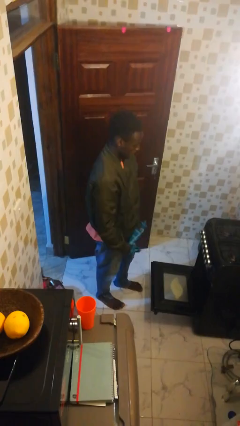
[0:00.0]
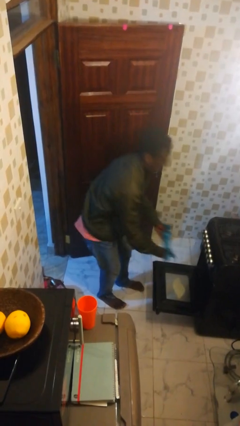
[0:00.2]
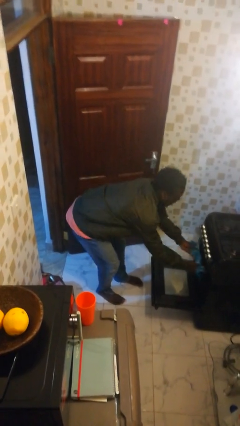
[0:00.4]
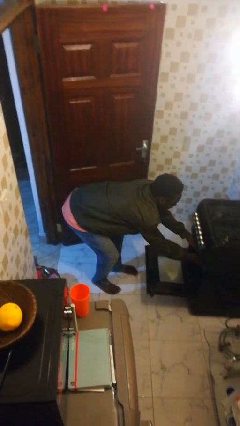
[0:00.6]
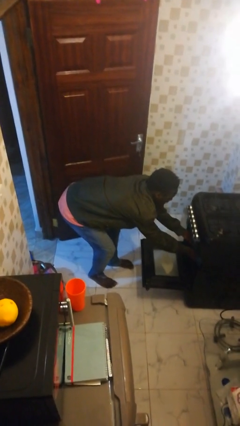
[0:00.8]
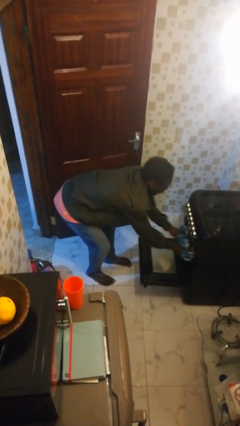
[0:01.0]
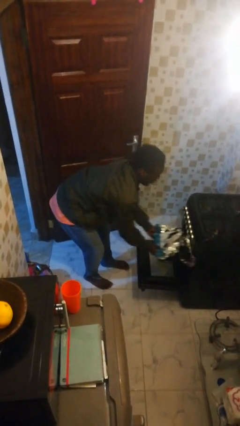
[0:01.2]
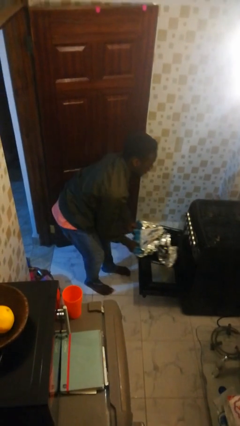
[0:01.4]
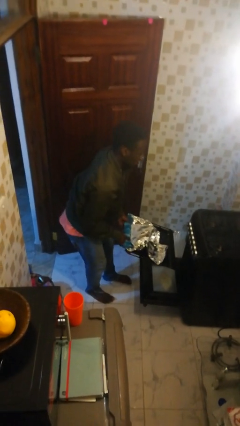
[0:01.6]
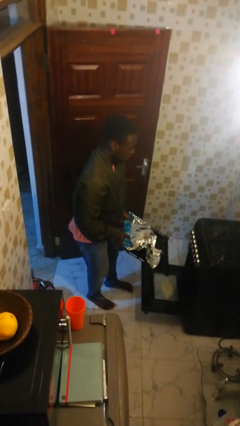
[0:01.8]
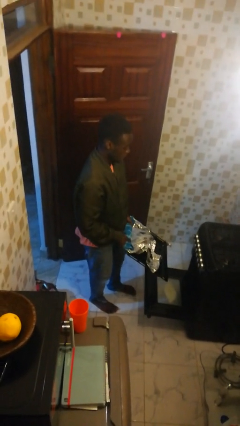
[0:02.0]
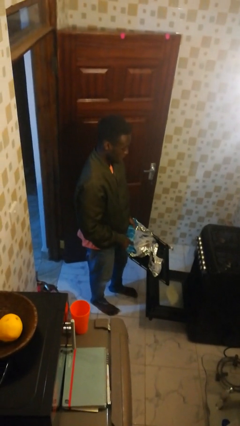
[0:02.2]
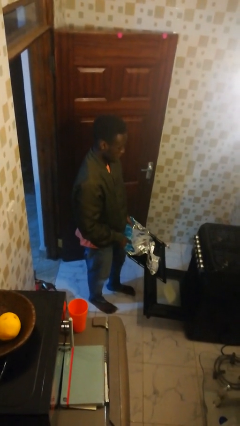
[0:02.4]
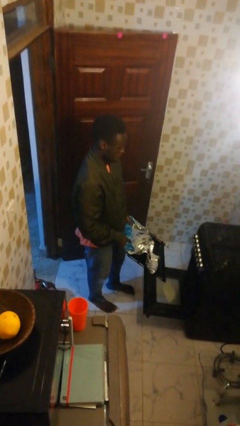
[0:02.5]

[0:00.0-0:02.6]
person takes object from oven

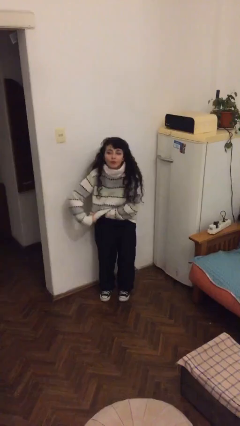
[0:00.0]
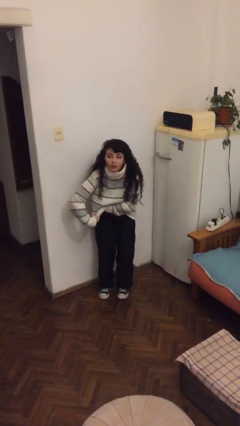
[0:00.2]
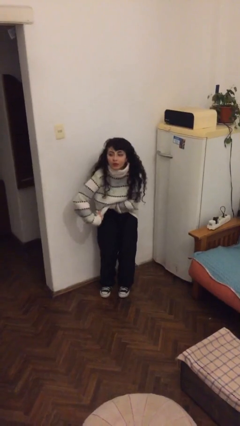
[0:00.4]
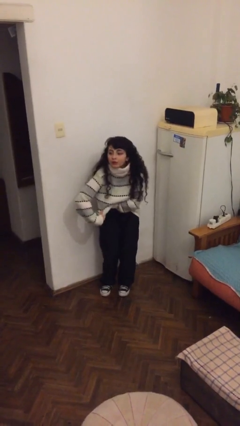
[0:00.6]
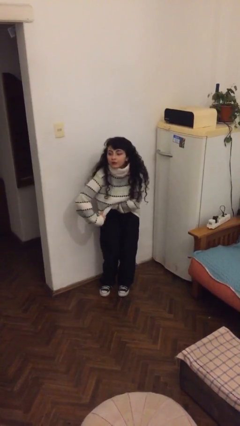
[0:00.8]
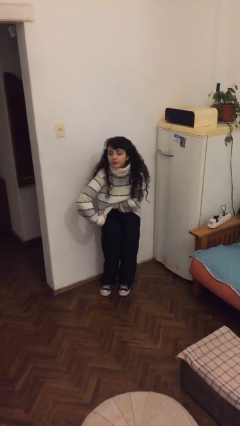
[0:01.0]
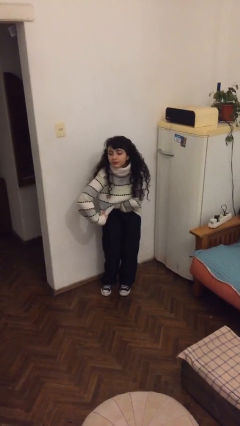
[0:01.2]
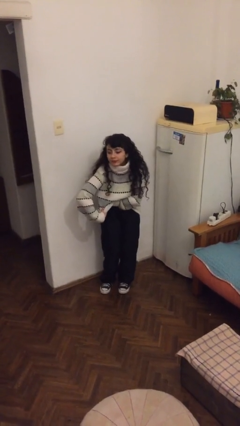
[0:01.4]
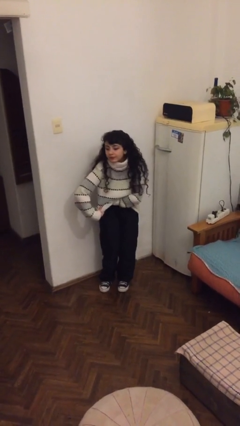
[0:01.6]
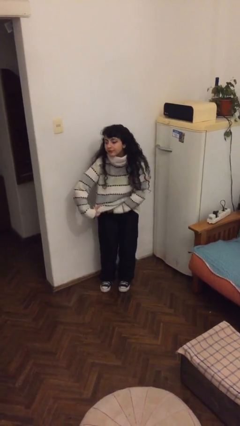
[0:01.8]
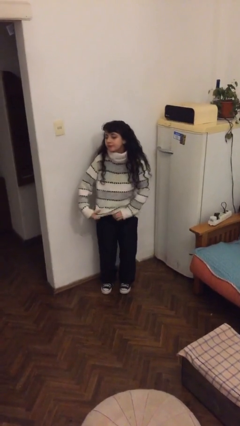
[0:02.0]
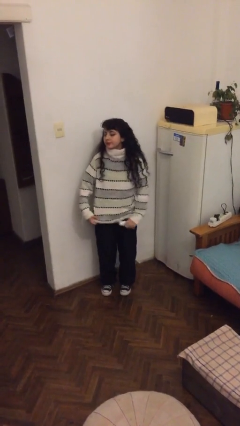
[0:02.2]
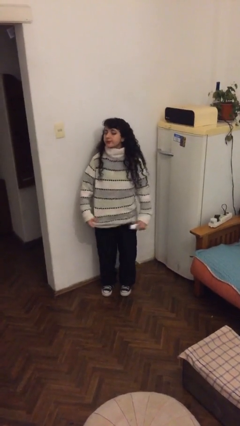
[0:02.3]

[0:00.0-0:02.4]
person applies deodorant

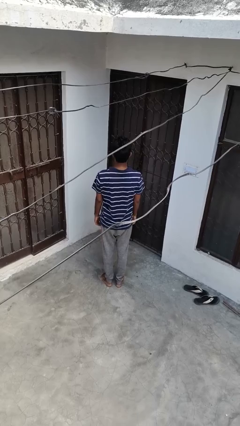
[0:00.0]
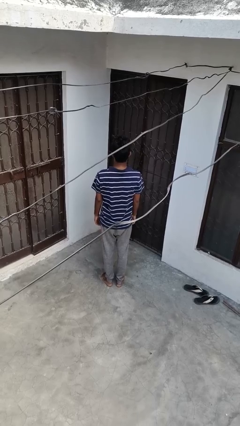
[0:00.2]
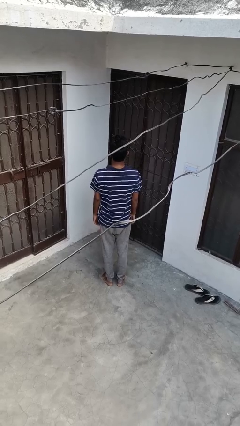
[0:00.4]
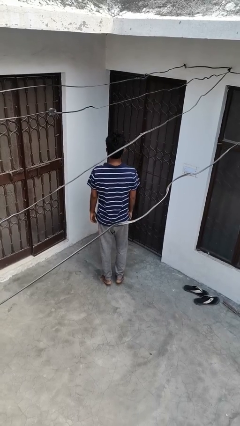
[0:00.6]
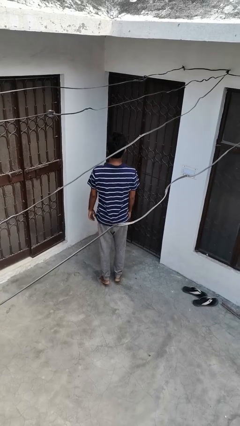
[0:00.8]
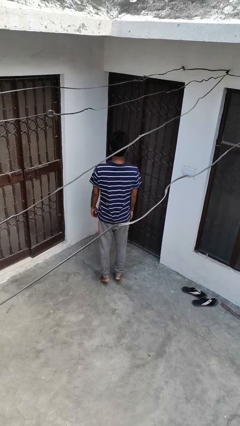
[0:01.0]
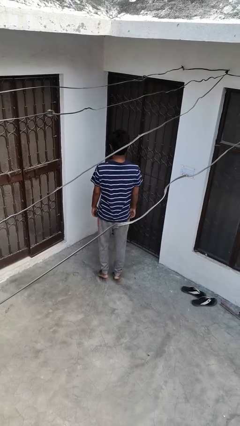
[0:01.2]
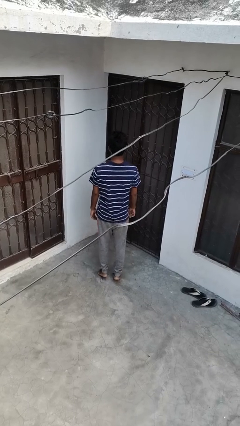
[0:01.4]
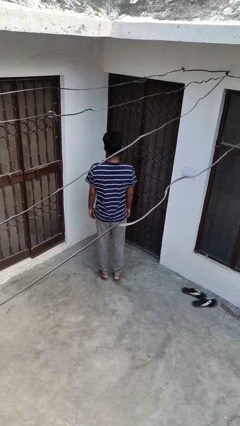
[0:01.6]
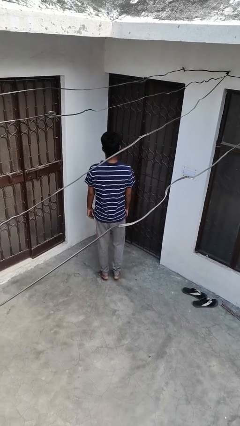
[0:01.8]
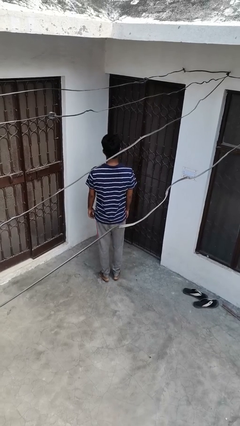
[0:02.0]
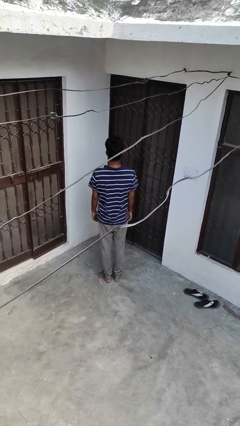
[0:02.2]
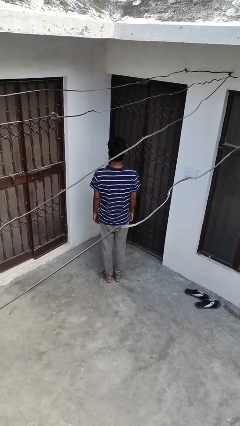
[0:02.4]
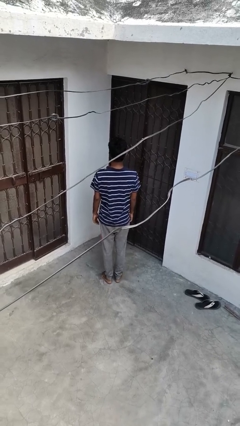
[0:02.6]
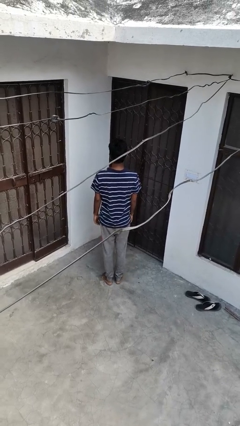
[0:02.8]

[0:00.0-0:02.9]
person walks tiptoe

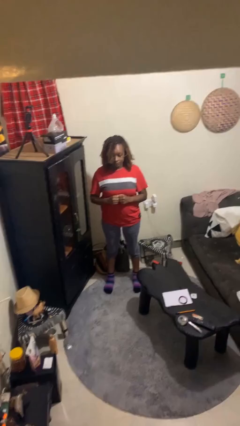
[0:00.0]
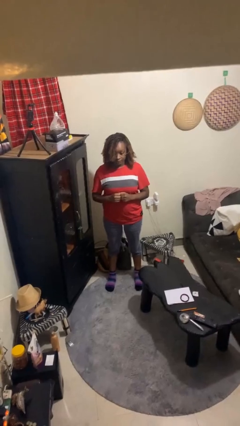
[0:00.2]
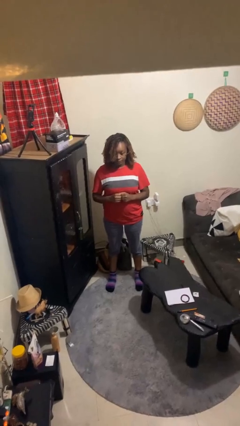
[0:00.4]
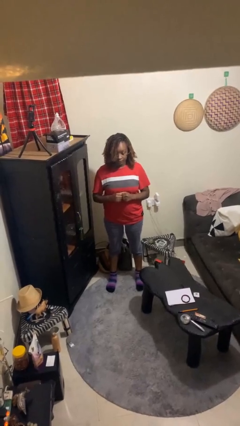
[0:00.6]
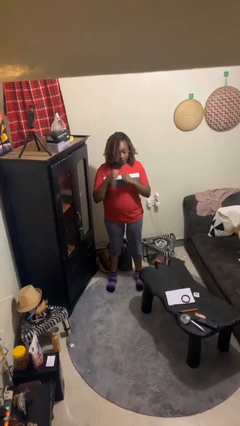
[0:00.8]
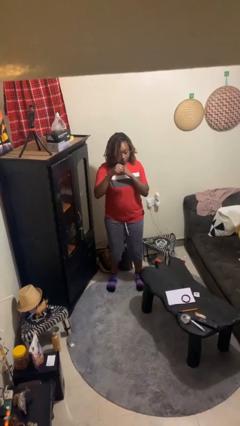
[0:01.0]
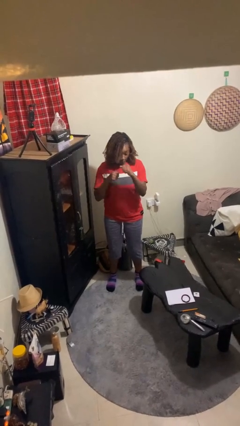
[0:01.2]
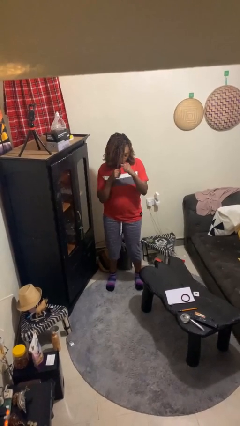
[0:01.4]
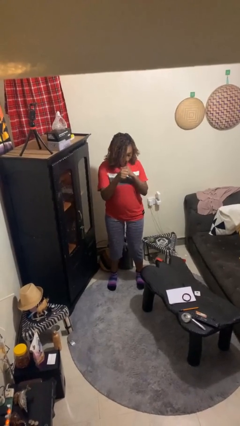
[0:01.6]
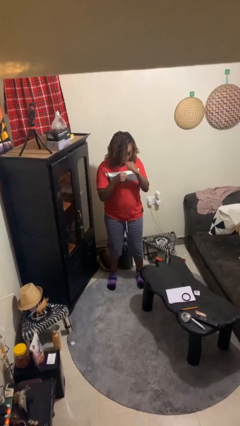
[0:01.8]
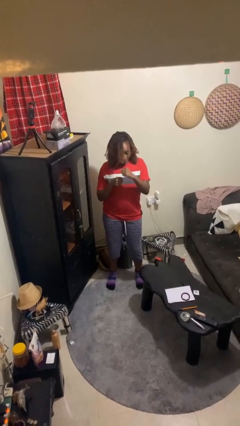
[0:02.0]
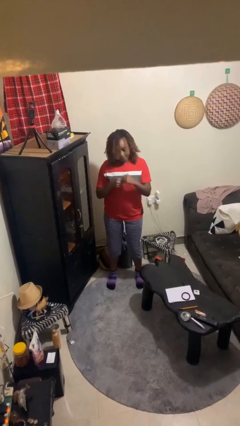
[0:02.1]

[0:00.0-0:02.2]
person punches

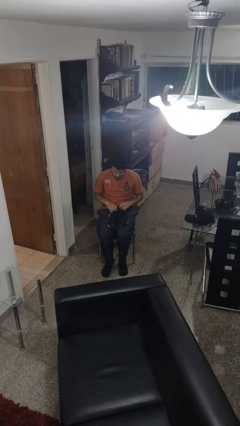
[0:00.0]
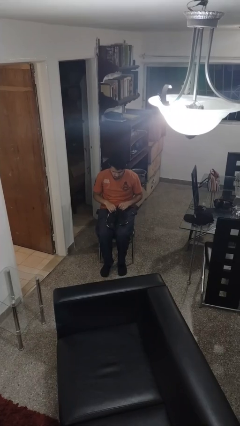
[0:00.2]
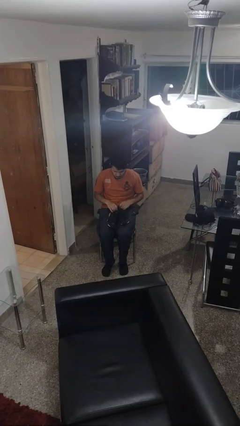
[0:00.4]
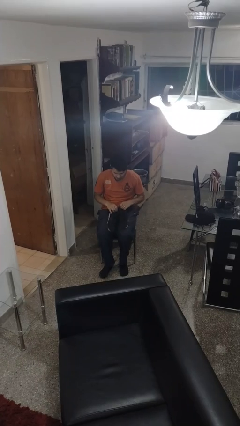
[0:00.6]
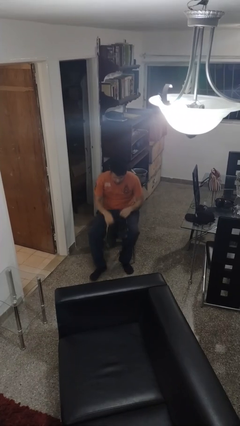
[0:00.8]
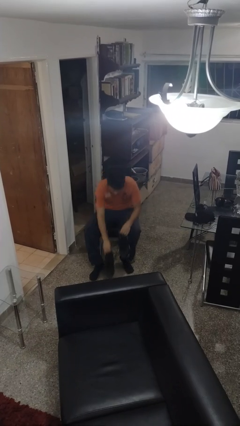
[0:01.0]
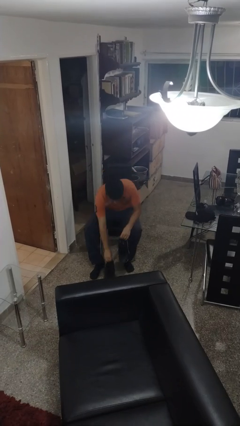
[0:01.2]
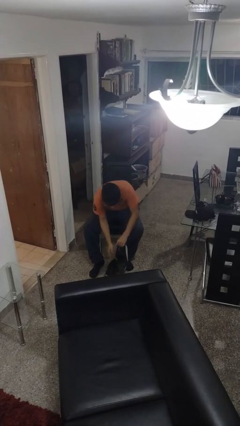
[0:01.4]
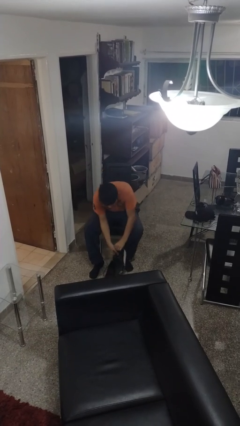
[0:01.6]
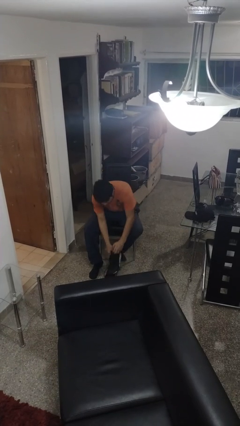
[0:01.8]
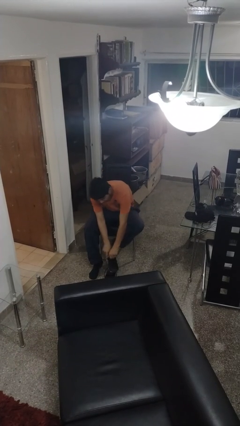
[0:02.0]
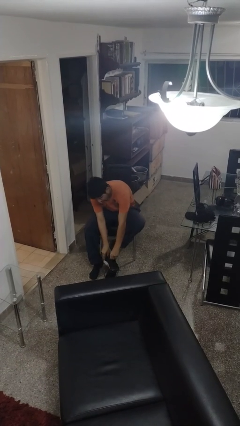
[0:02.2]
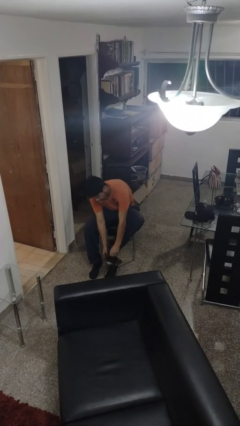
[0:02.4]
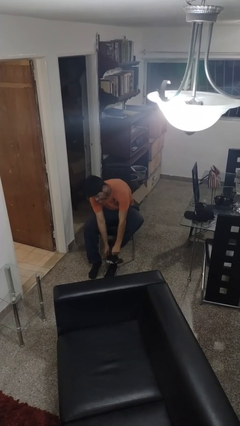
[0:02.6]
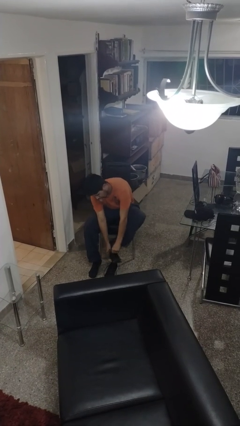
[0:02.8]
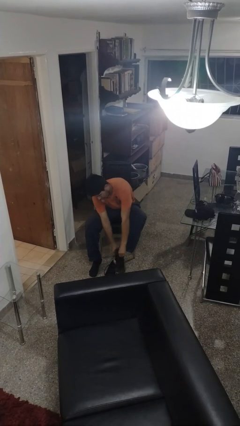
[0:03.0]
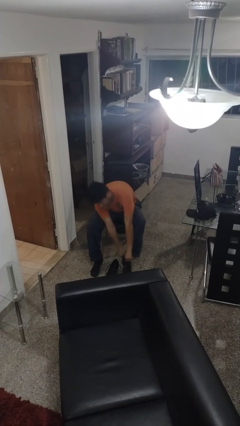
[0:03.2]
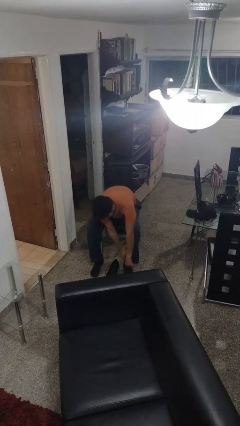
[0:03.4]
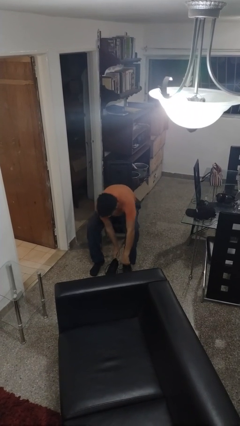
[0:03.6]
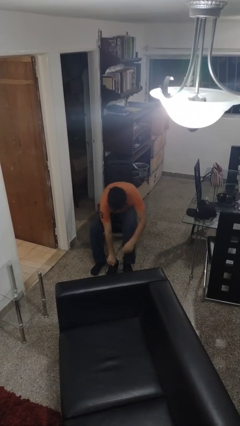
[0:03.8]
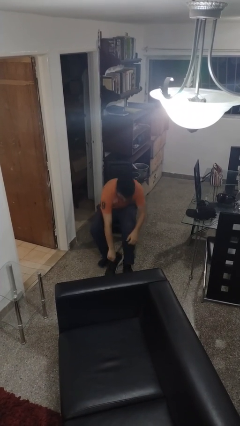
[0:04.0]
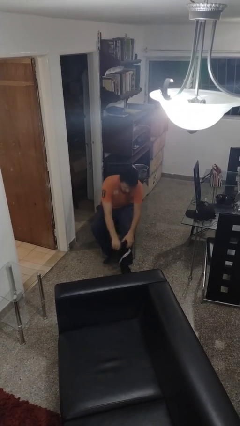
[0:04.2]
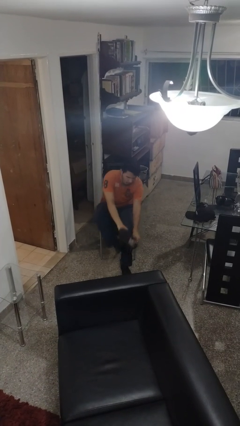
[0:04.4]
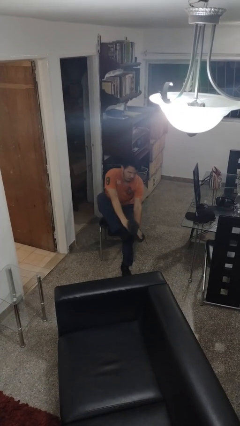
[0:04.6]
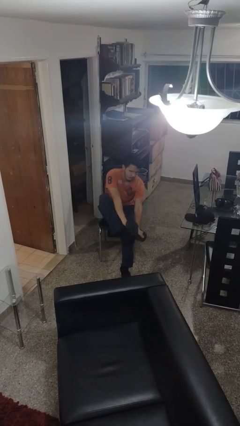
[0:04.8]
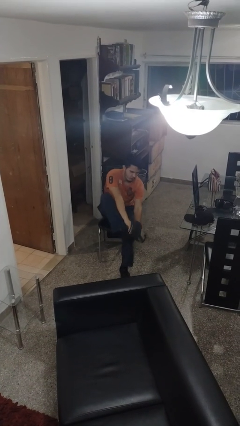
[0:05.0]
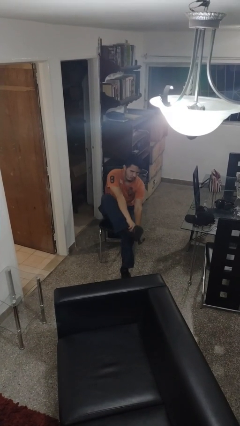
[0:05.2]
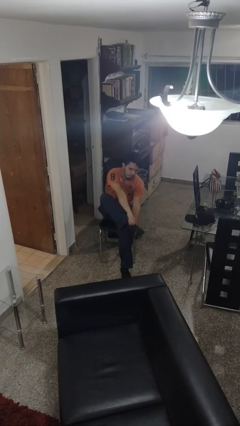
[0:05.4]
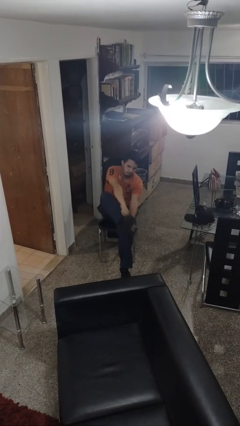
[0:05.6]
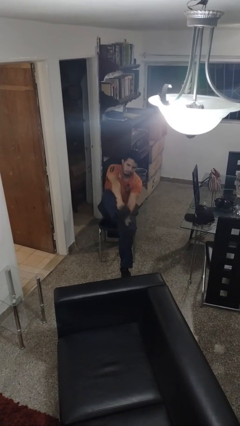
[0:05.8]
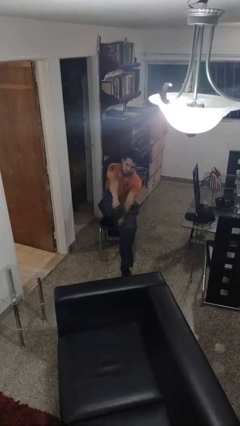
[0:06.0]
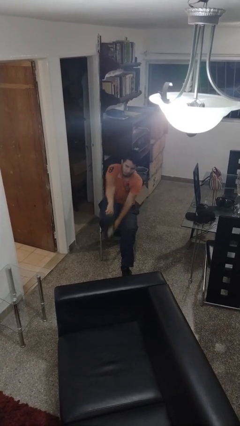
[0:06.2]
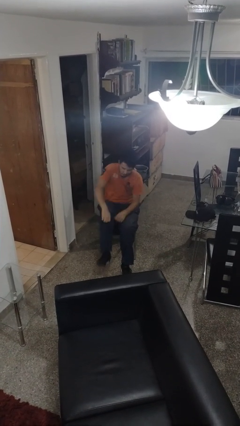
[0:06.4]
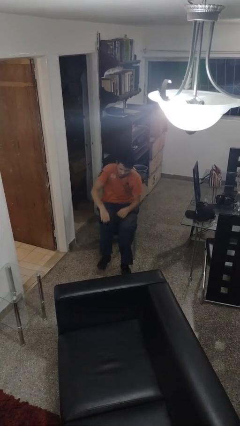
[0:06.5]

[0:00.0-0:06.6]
person puts on shoes

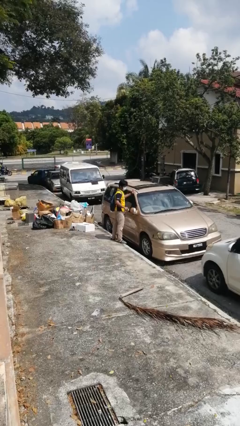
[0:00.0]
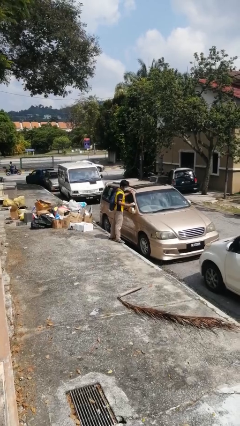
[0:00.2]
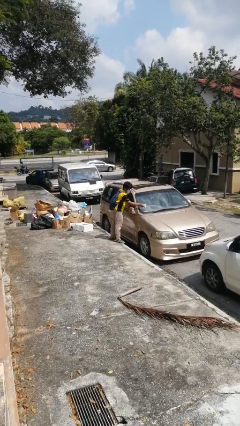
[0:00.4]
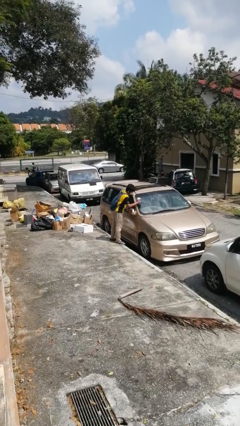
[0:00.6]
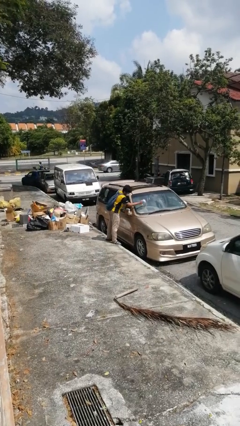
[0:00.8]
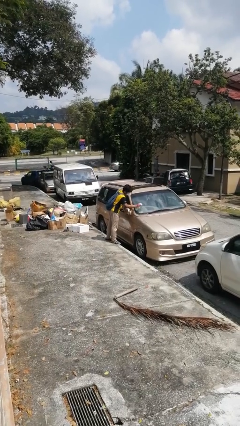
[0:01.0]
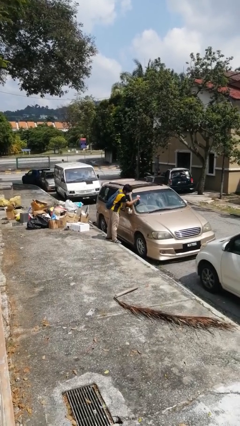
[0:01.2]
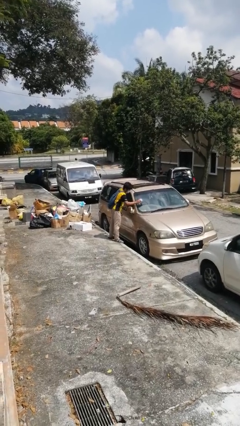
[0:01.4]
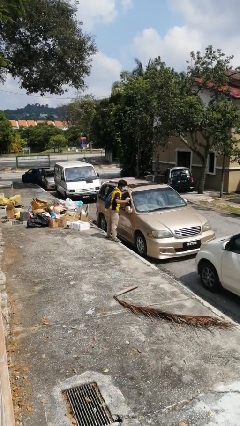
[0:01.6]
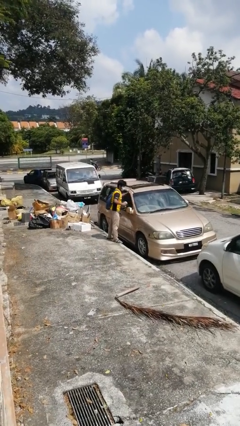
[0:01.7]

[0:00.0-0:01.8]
person polishes car with rag
